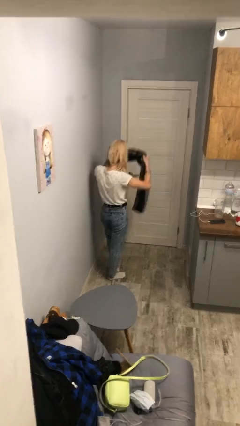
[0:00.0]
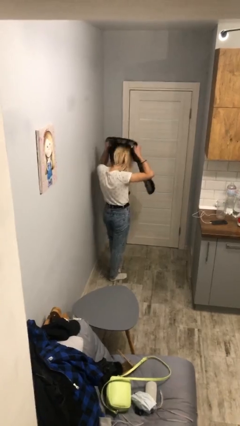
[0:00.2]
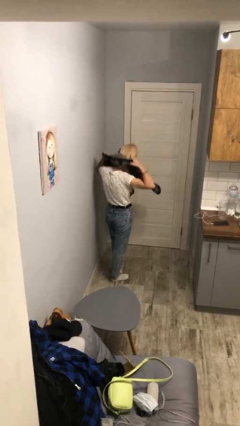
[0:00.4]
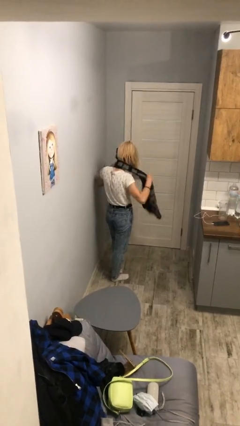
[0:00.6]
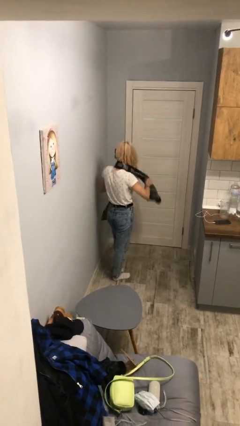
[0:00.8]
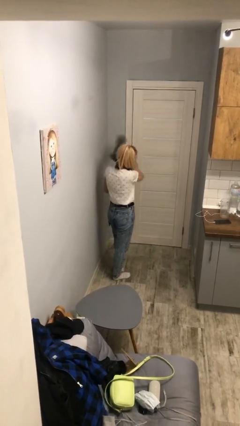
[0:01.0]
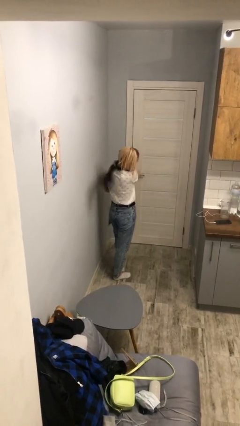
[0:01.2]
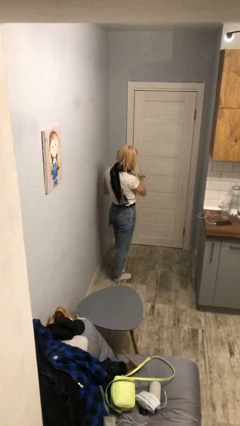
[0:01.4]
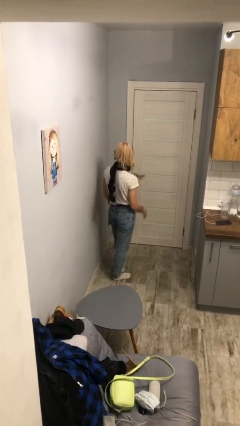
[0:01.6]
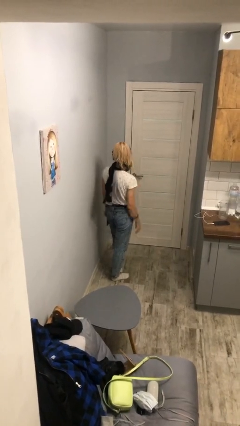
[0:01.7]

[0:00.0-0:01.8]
person puts on scarf

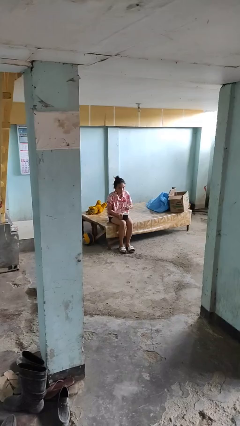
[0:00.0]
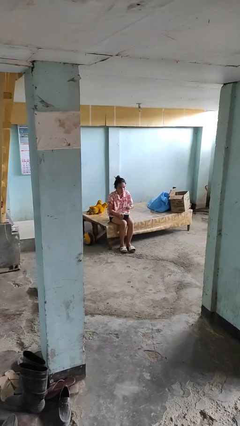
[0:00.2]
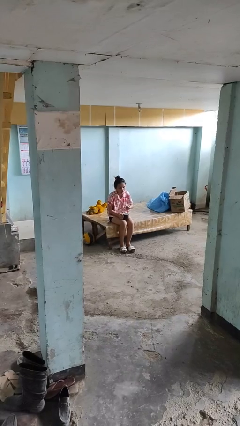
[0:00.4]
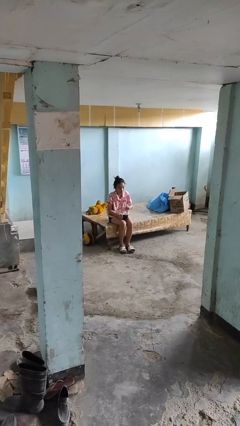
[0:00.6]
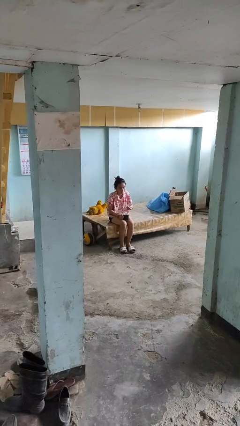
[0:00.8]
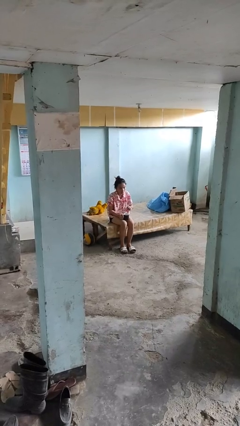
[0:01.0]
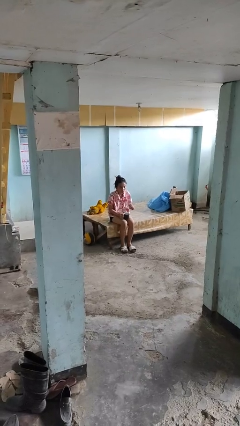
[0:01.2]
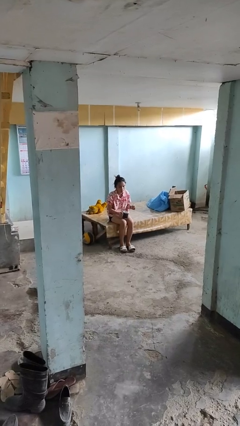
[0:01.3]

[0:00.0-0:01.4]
person stirs mug

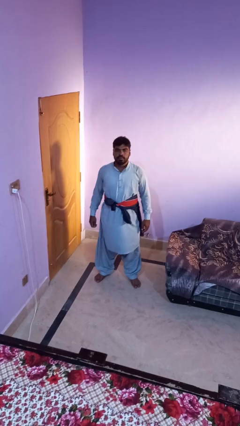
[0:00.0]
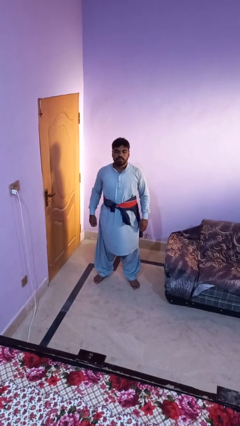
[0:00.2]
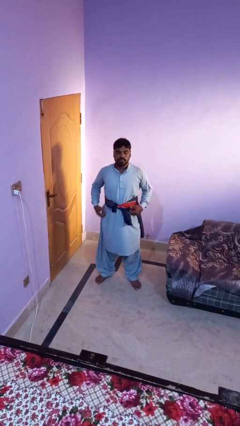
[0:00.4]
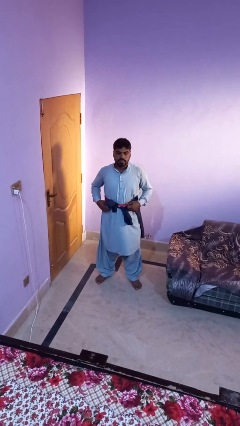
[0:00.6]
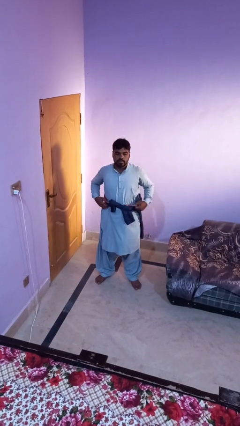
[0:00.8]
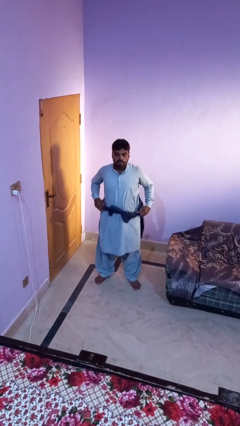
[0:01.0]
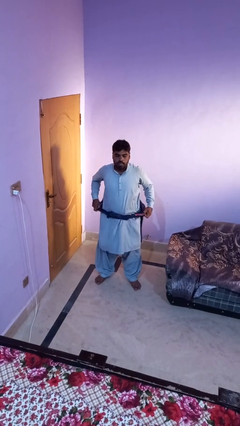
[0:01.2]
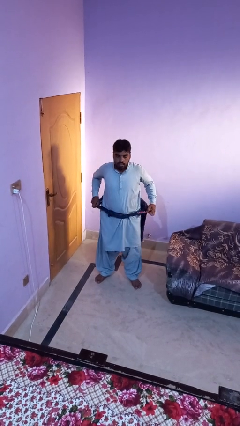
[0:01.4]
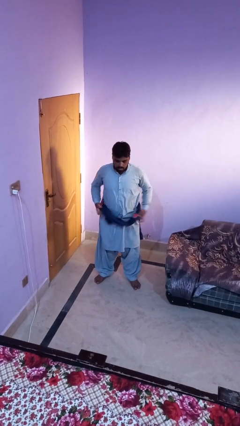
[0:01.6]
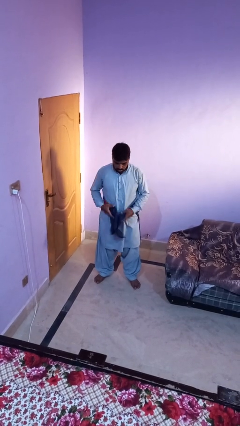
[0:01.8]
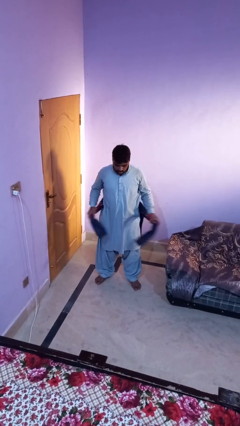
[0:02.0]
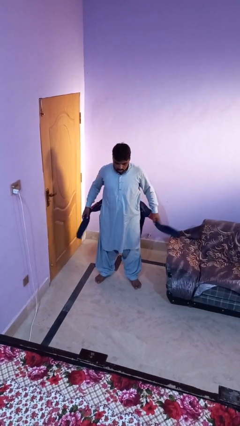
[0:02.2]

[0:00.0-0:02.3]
person unties jacket around waist

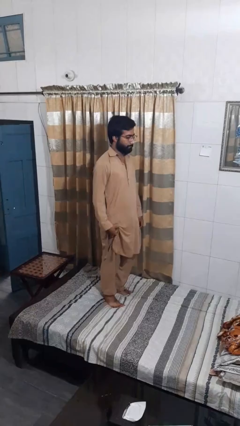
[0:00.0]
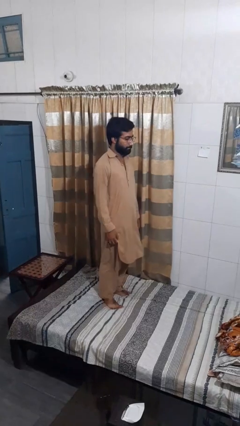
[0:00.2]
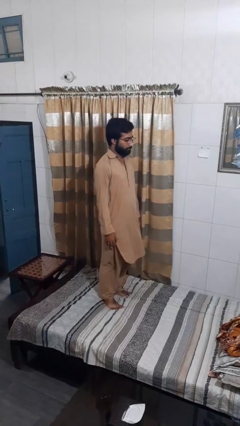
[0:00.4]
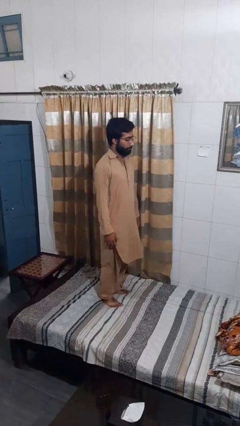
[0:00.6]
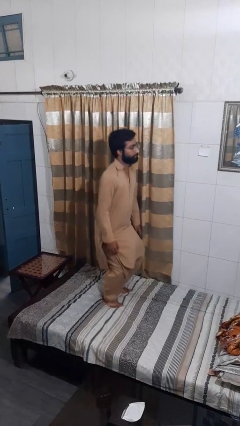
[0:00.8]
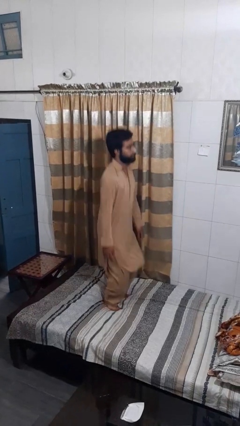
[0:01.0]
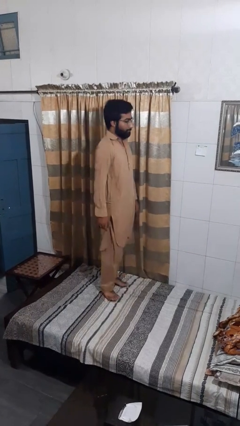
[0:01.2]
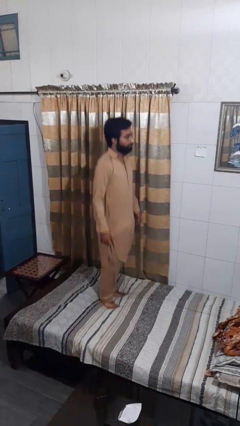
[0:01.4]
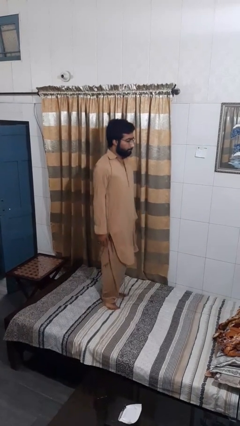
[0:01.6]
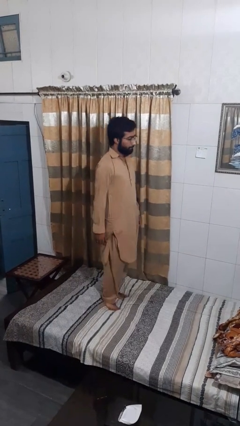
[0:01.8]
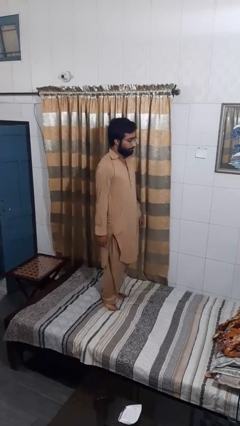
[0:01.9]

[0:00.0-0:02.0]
person jumps on bed

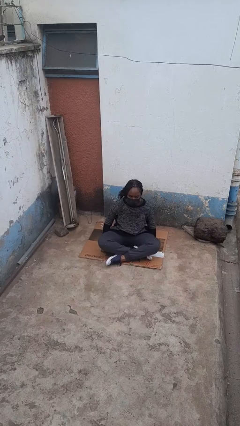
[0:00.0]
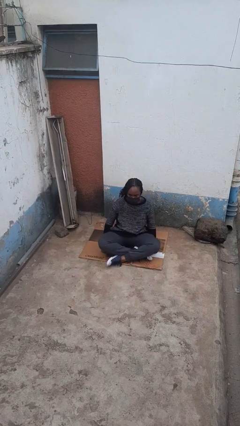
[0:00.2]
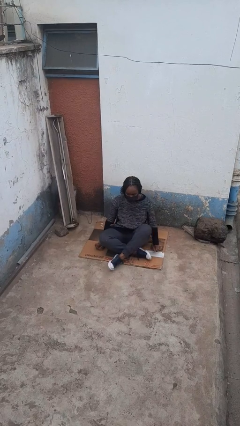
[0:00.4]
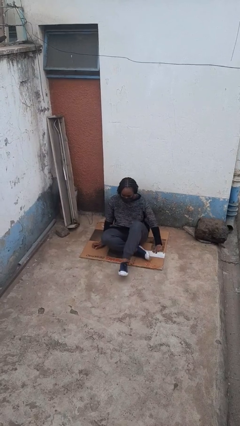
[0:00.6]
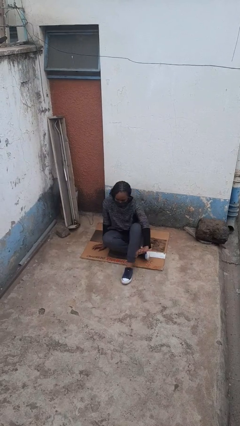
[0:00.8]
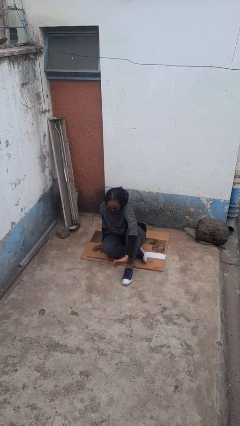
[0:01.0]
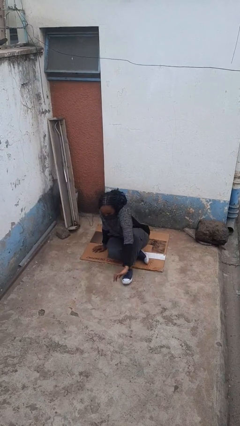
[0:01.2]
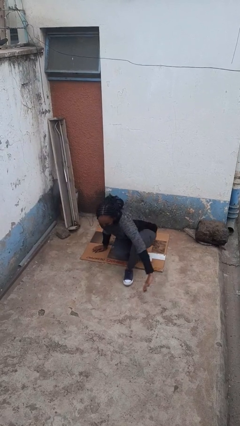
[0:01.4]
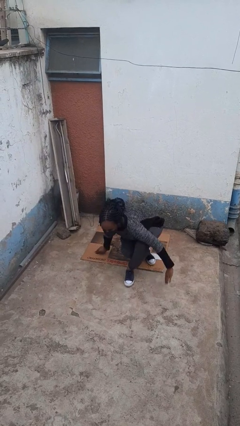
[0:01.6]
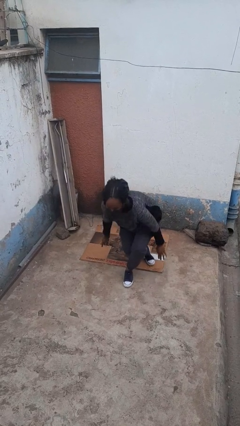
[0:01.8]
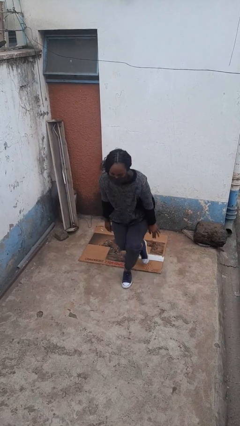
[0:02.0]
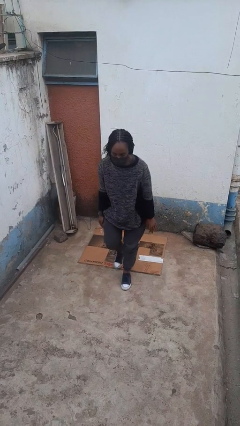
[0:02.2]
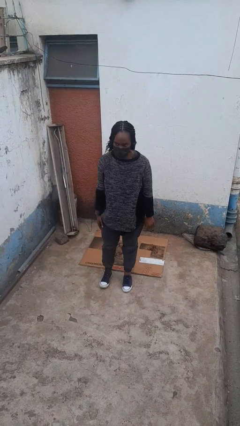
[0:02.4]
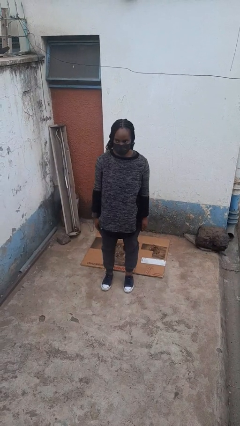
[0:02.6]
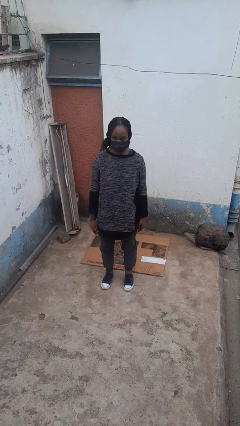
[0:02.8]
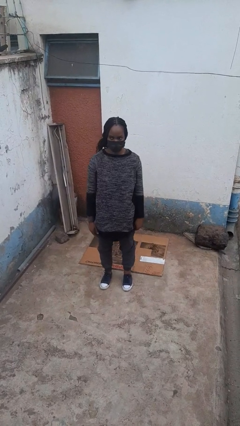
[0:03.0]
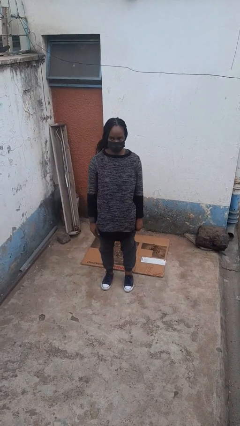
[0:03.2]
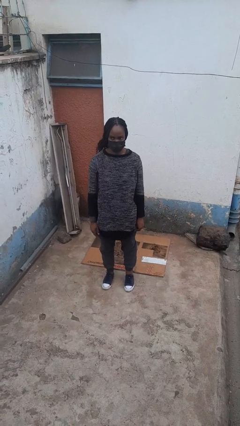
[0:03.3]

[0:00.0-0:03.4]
person stands up from floor

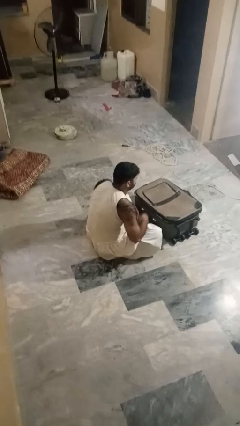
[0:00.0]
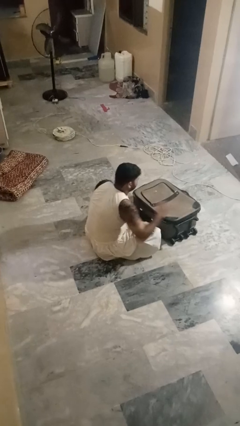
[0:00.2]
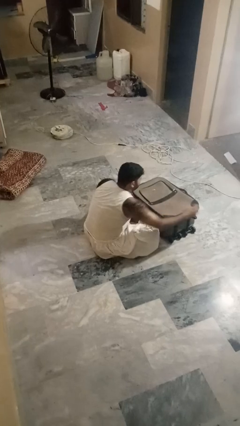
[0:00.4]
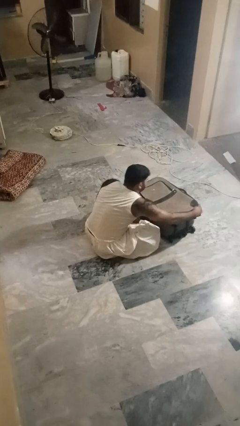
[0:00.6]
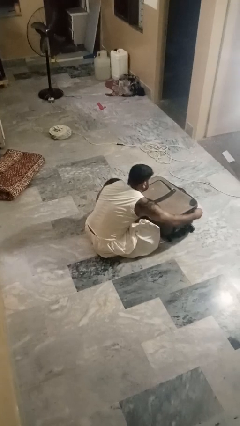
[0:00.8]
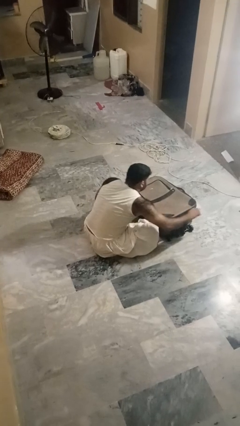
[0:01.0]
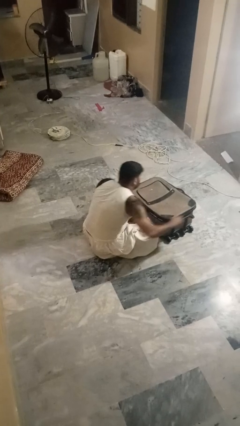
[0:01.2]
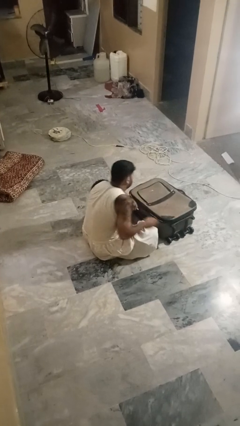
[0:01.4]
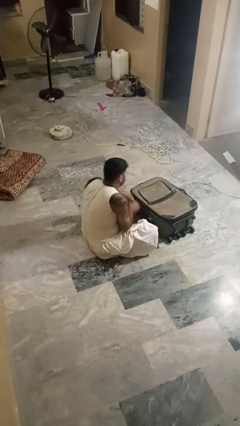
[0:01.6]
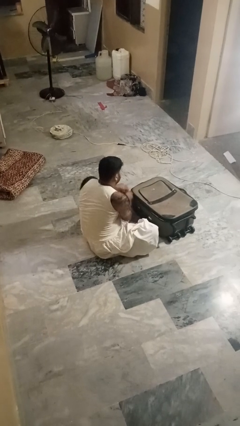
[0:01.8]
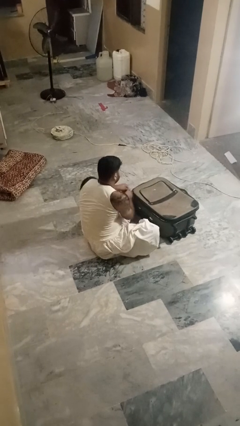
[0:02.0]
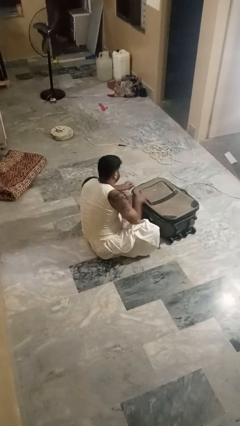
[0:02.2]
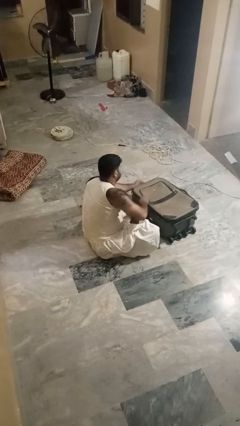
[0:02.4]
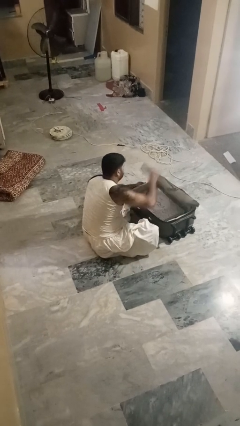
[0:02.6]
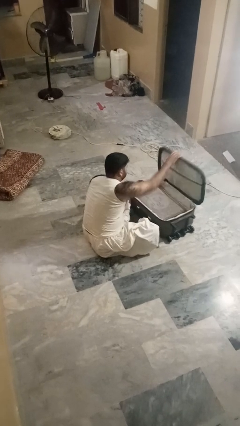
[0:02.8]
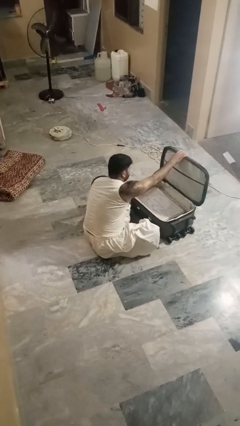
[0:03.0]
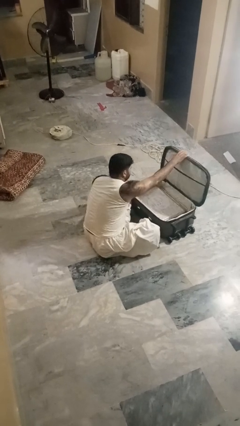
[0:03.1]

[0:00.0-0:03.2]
person opens suitcase

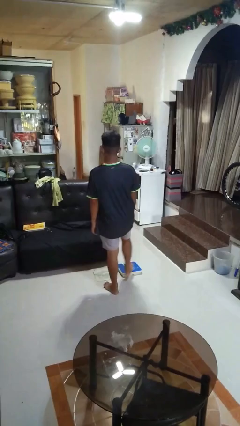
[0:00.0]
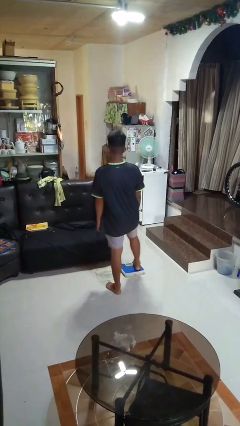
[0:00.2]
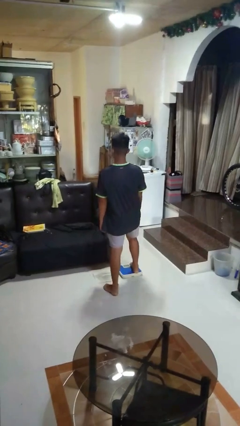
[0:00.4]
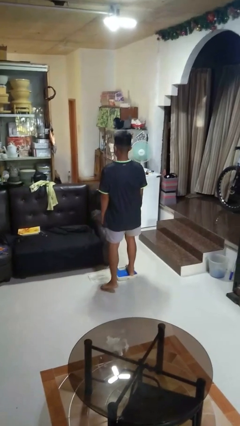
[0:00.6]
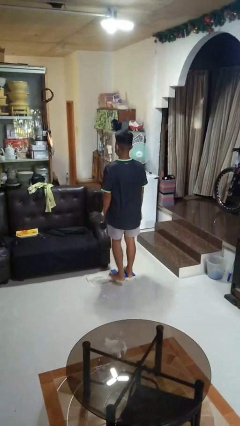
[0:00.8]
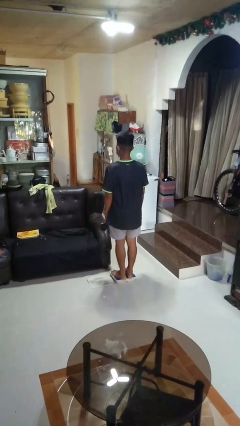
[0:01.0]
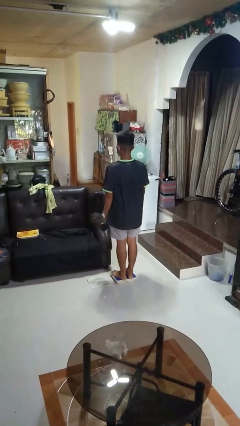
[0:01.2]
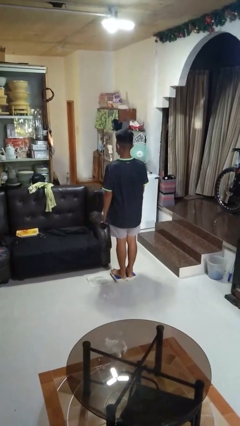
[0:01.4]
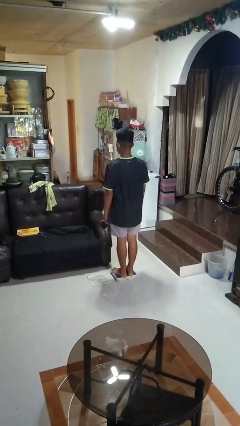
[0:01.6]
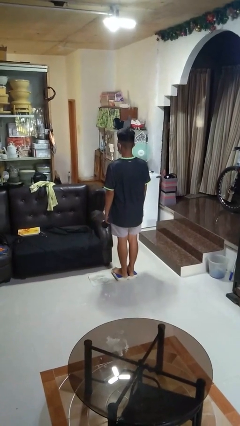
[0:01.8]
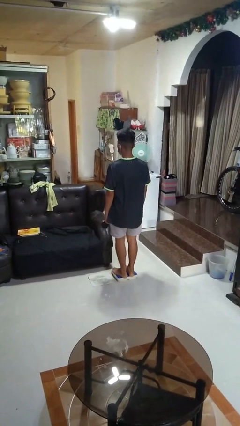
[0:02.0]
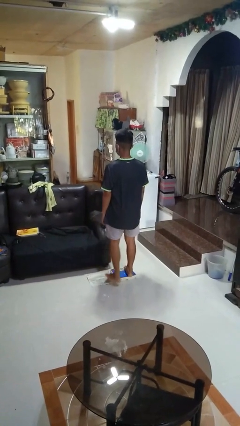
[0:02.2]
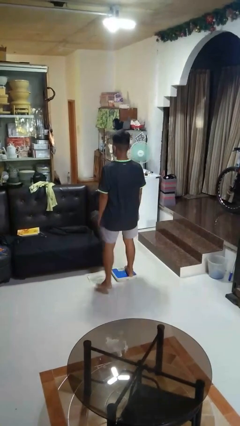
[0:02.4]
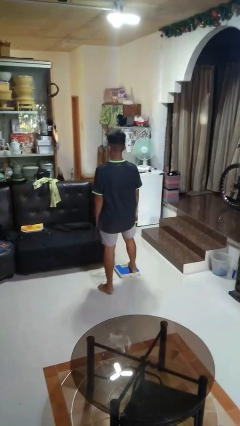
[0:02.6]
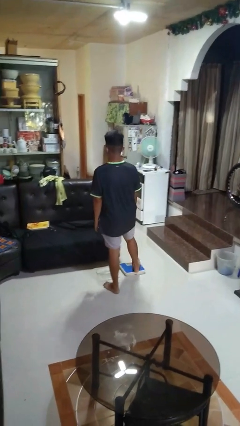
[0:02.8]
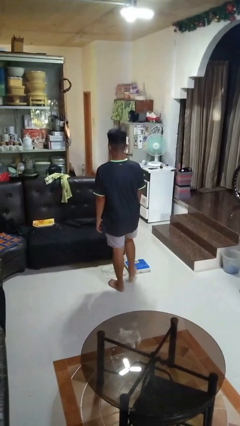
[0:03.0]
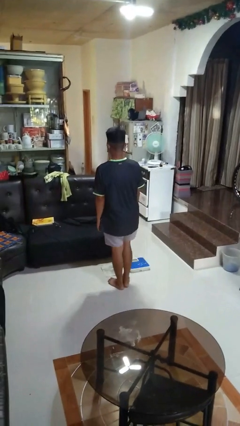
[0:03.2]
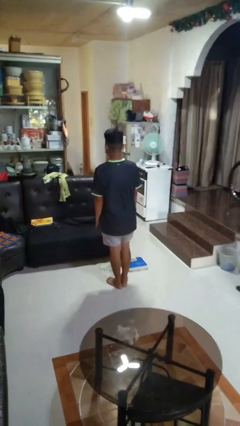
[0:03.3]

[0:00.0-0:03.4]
person uses bodyweight scale

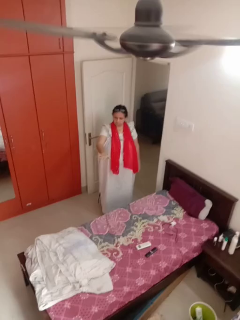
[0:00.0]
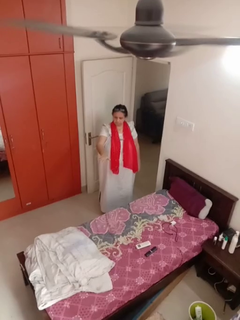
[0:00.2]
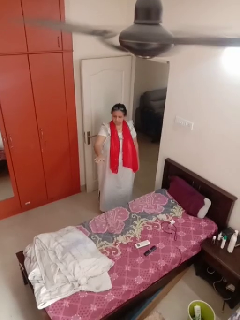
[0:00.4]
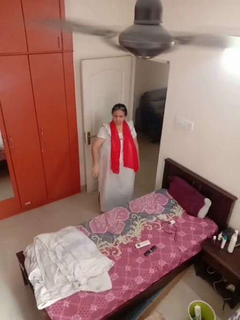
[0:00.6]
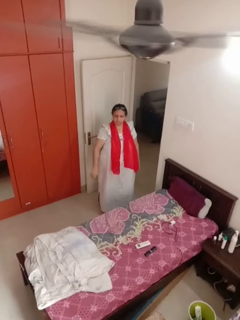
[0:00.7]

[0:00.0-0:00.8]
person gestures swipe down
